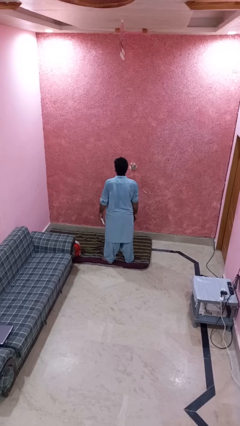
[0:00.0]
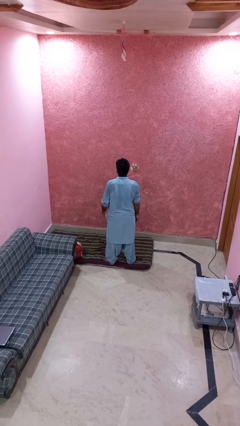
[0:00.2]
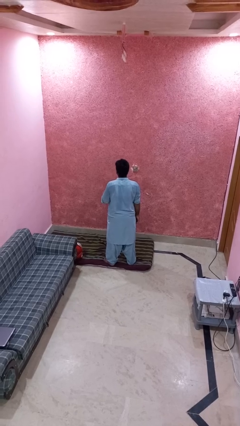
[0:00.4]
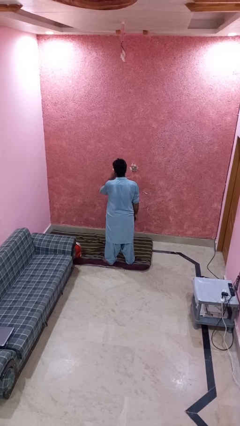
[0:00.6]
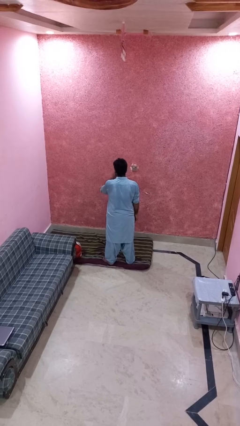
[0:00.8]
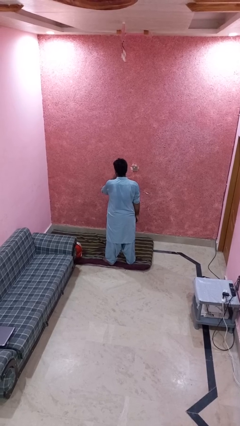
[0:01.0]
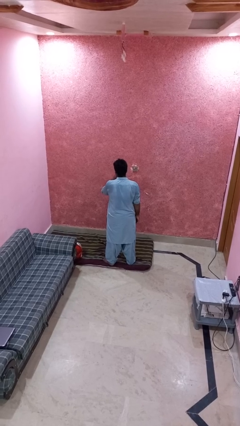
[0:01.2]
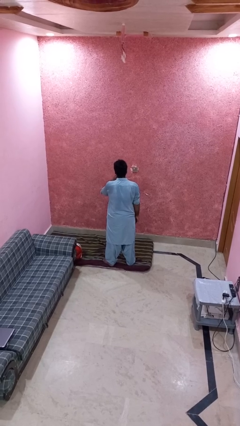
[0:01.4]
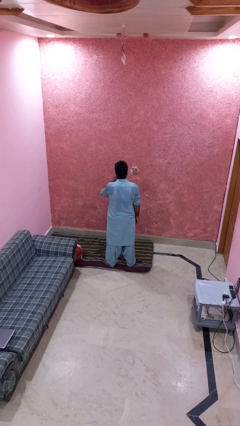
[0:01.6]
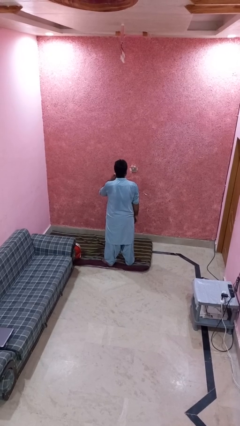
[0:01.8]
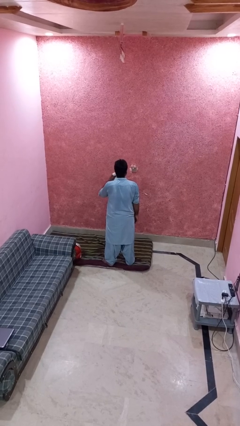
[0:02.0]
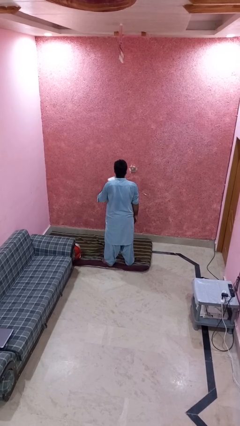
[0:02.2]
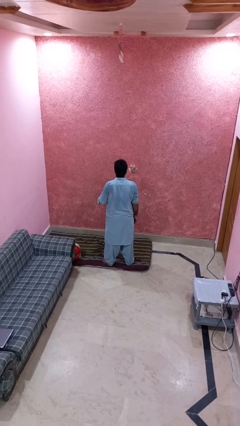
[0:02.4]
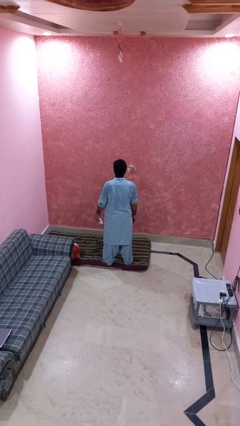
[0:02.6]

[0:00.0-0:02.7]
person wipes mouth with napkin

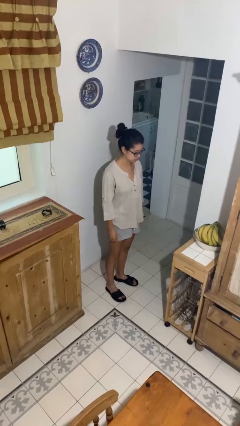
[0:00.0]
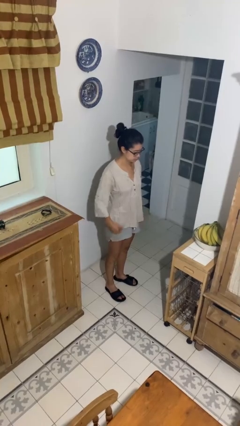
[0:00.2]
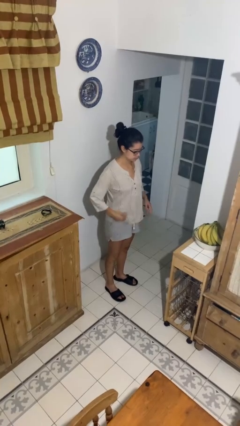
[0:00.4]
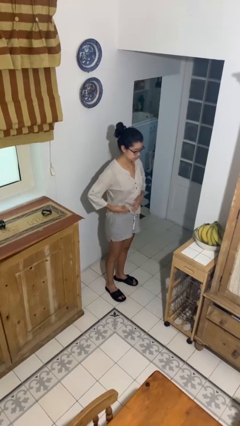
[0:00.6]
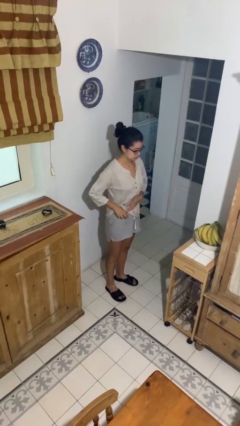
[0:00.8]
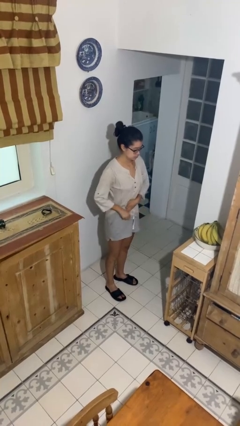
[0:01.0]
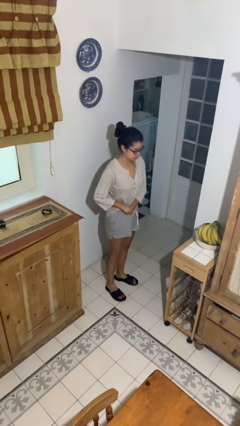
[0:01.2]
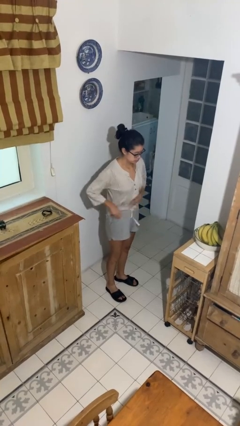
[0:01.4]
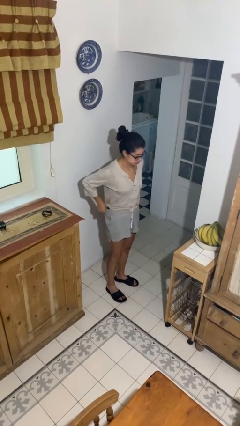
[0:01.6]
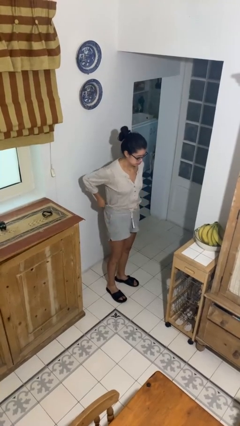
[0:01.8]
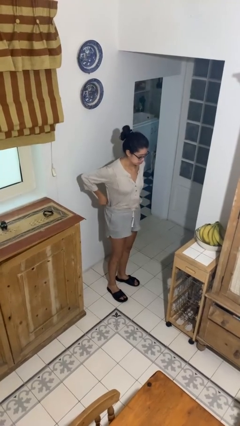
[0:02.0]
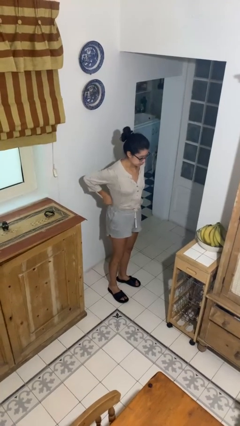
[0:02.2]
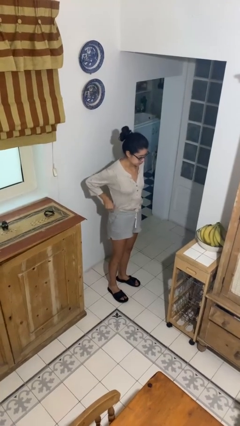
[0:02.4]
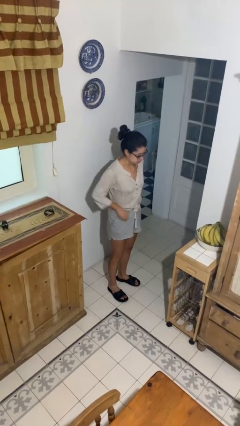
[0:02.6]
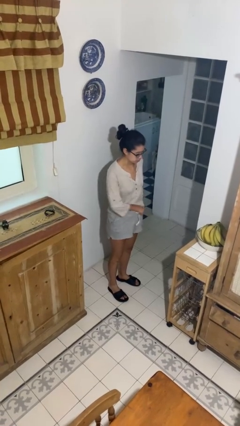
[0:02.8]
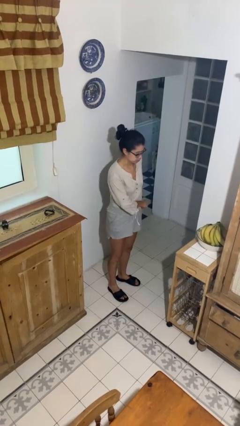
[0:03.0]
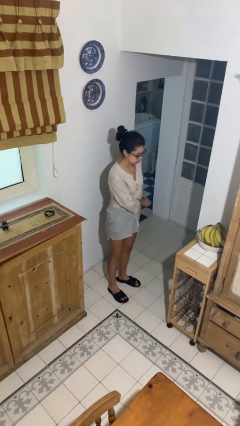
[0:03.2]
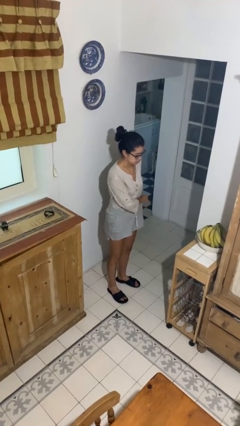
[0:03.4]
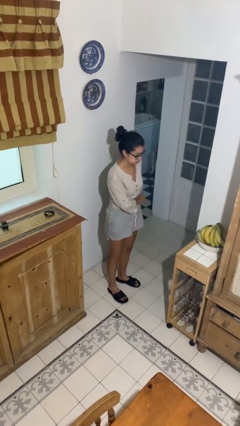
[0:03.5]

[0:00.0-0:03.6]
person tucks in shirt

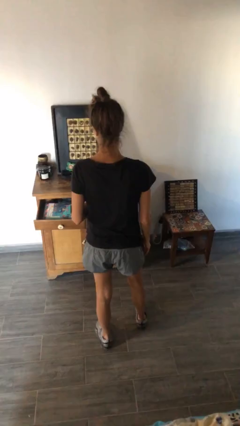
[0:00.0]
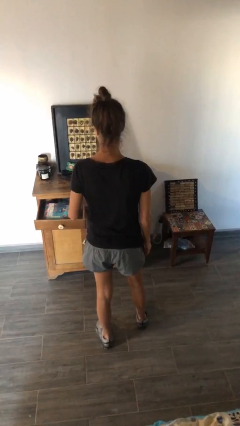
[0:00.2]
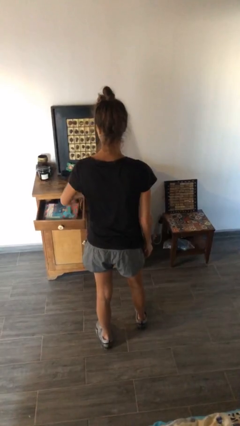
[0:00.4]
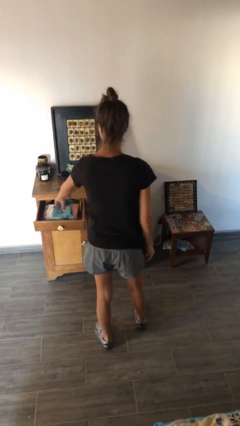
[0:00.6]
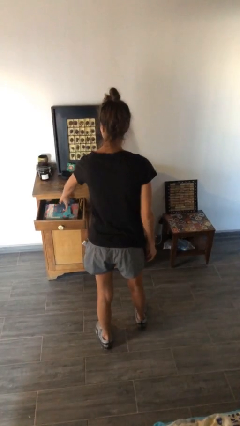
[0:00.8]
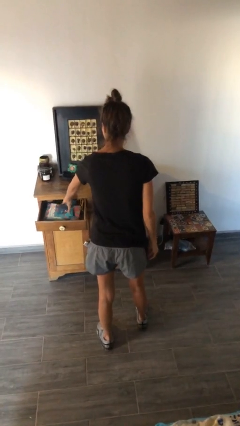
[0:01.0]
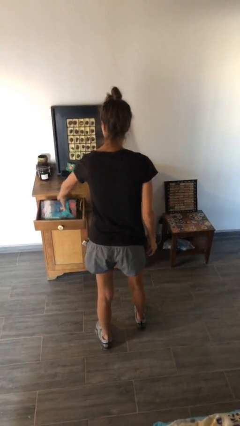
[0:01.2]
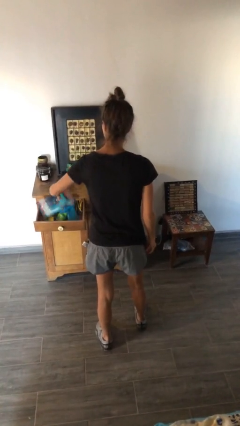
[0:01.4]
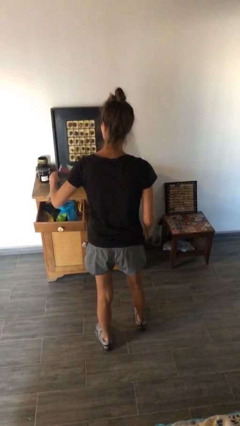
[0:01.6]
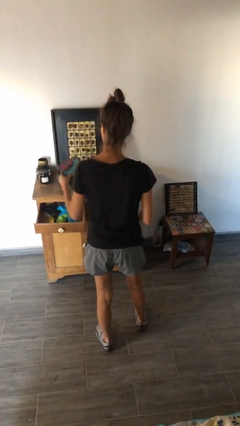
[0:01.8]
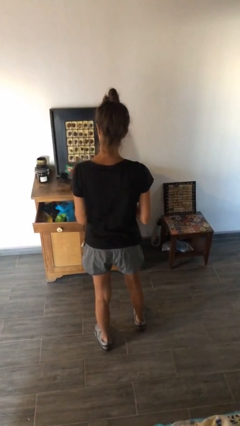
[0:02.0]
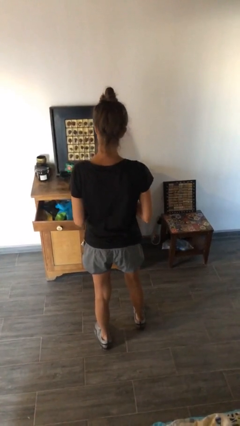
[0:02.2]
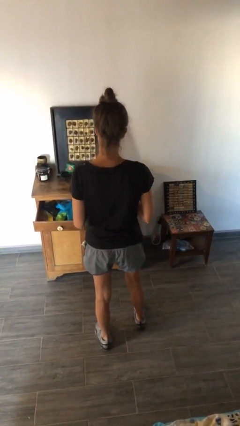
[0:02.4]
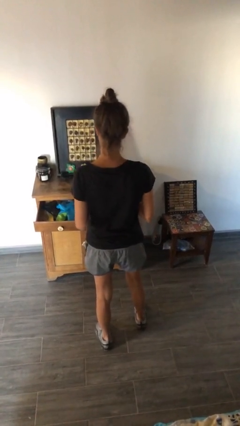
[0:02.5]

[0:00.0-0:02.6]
person picks up object from cabinet

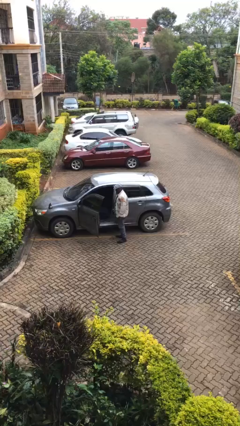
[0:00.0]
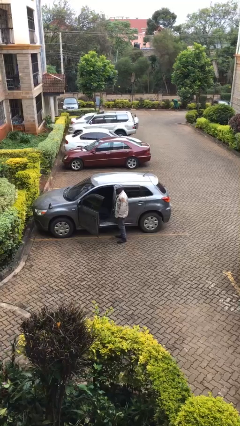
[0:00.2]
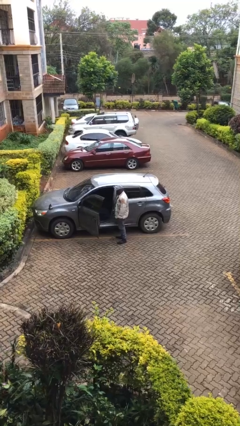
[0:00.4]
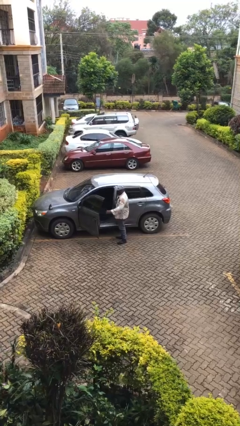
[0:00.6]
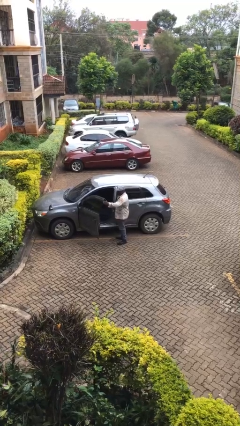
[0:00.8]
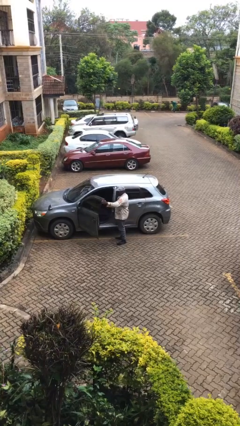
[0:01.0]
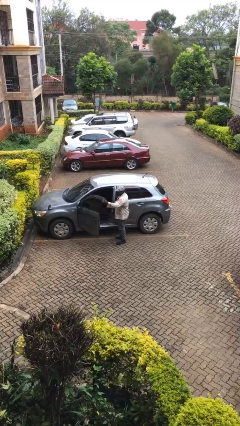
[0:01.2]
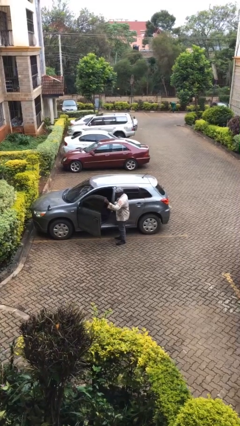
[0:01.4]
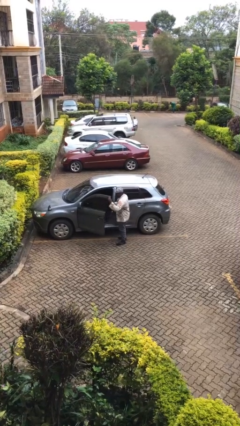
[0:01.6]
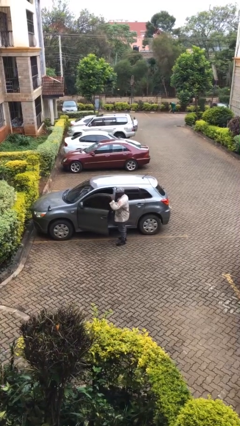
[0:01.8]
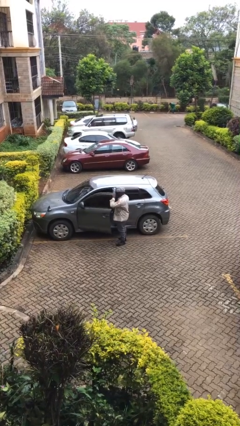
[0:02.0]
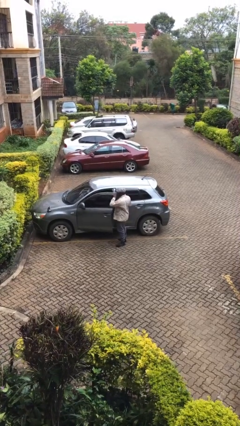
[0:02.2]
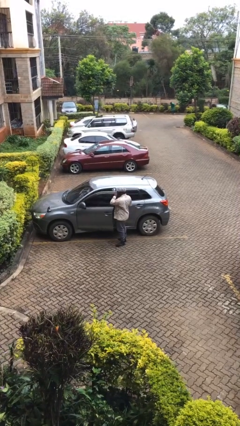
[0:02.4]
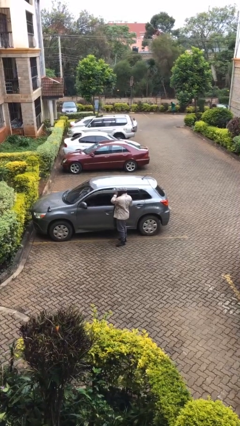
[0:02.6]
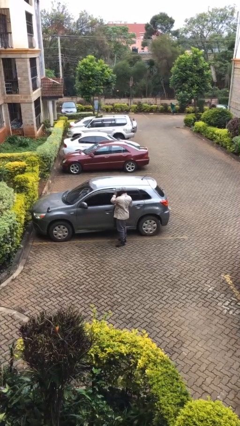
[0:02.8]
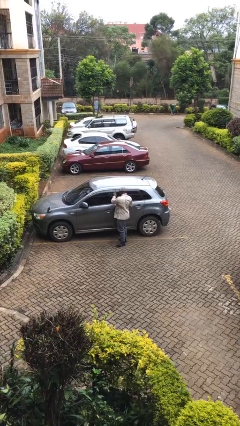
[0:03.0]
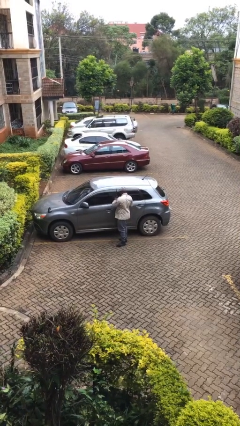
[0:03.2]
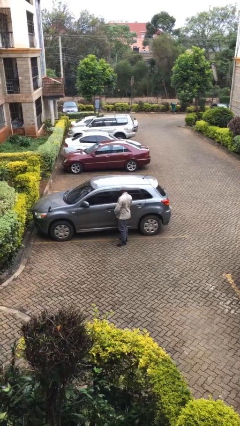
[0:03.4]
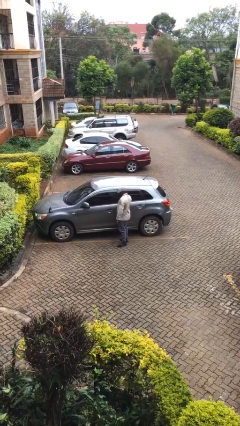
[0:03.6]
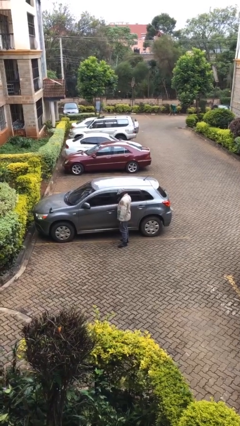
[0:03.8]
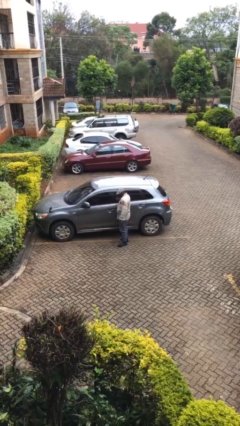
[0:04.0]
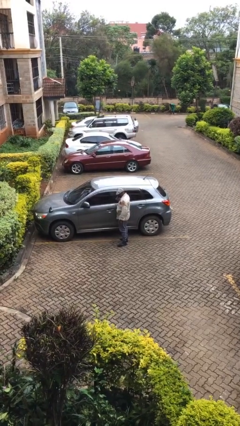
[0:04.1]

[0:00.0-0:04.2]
person closes car door

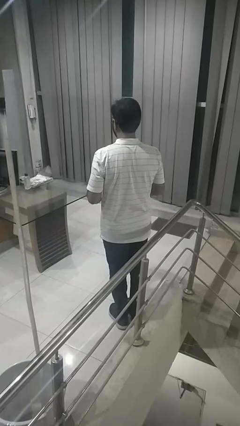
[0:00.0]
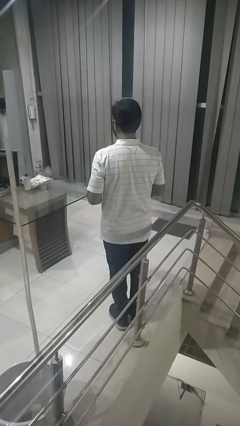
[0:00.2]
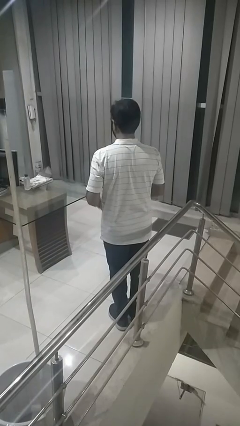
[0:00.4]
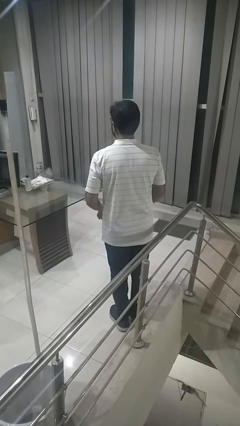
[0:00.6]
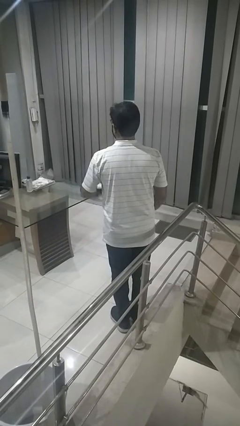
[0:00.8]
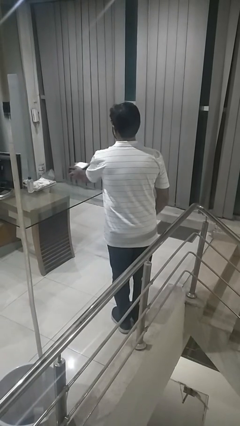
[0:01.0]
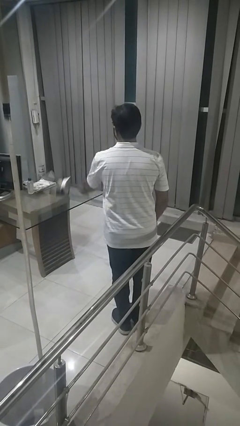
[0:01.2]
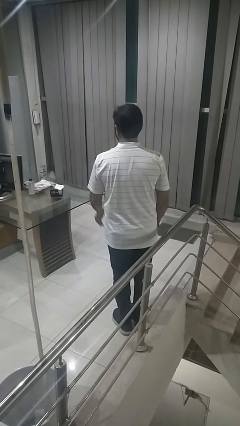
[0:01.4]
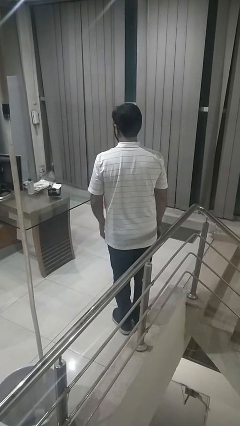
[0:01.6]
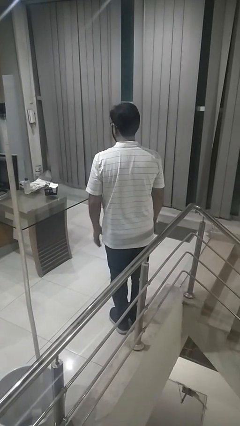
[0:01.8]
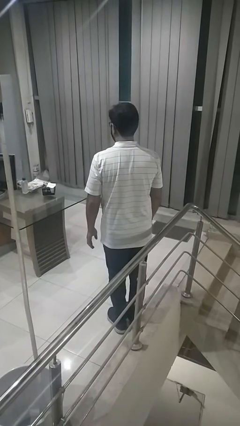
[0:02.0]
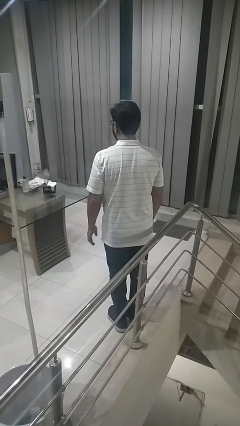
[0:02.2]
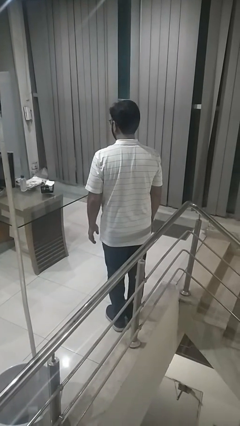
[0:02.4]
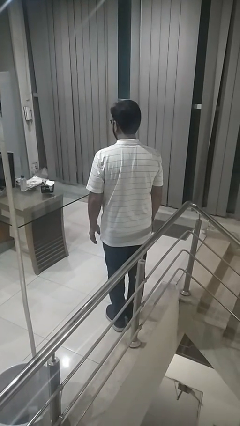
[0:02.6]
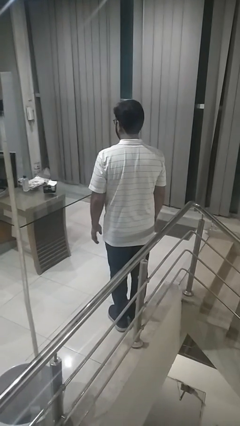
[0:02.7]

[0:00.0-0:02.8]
person throws object on table

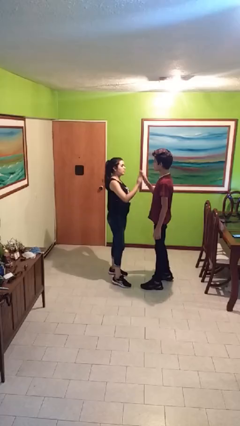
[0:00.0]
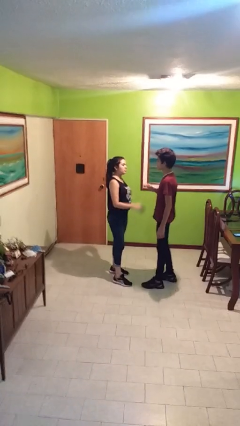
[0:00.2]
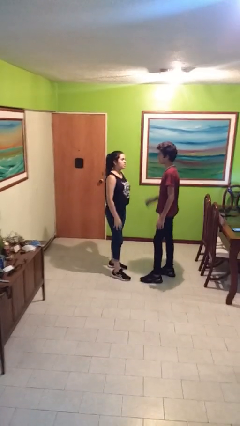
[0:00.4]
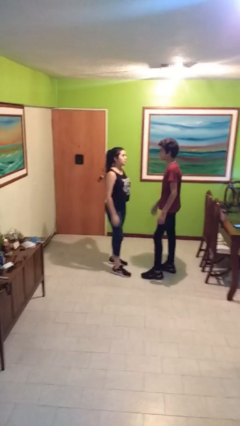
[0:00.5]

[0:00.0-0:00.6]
person highfives hand

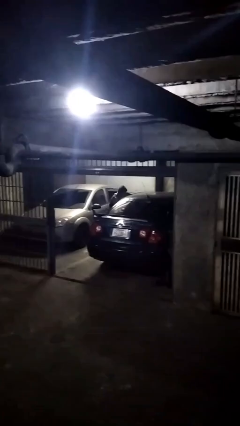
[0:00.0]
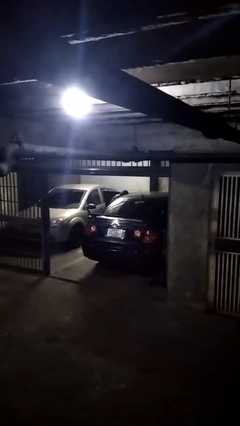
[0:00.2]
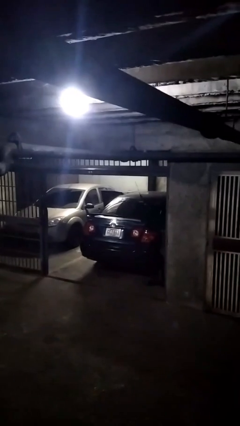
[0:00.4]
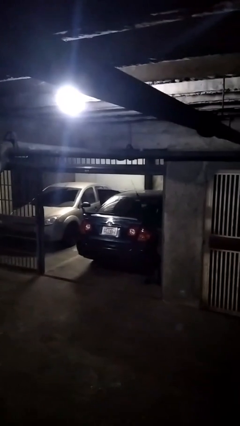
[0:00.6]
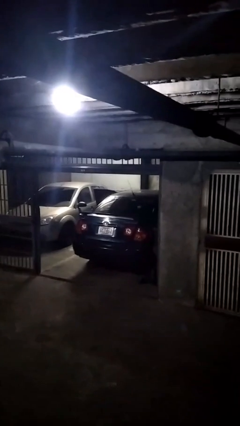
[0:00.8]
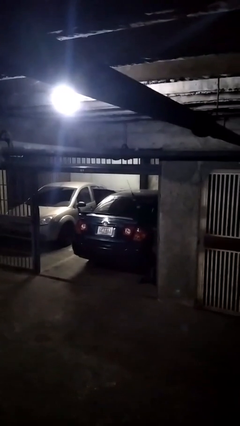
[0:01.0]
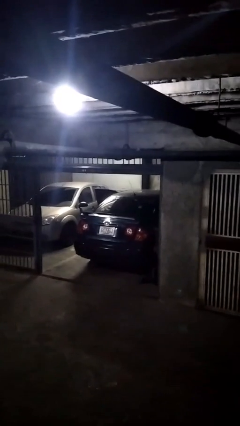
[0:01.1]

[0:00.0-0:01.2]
person loads car
